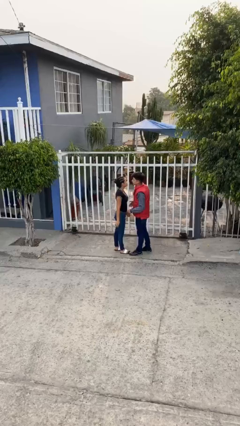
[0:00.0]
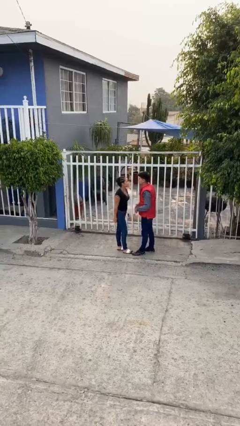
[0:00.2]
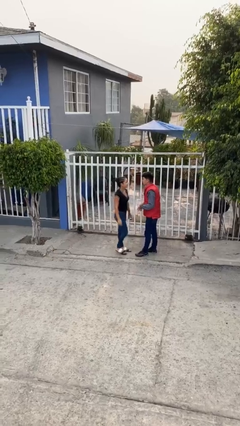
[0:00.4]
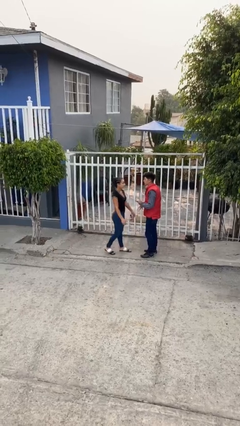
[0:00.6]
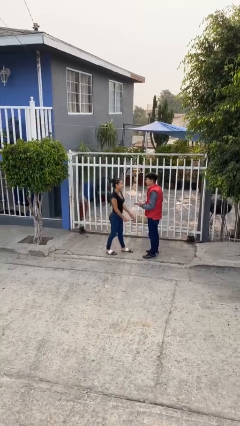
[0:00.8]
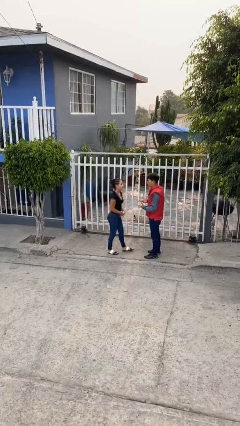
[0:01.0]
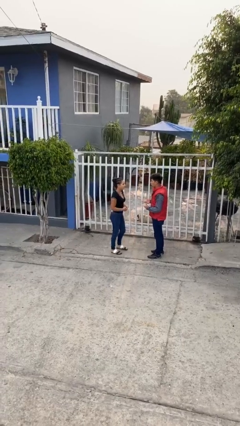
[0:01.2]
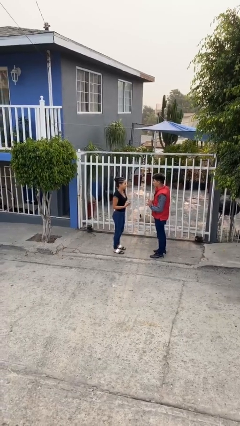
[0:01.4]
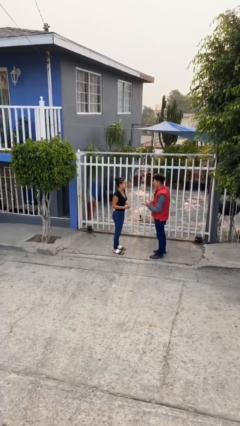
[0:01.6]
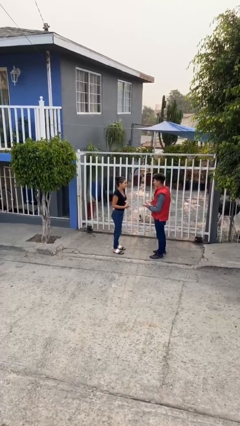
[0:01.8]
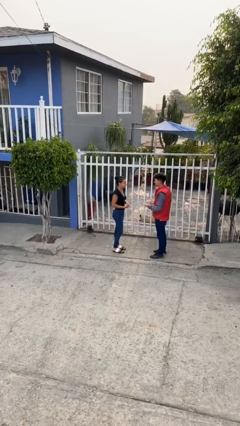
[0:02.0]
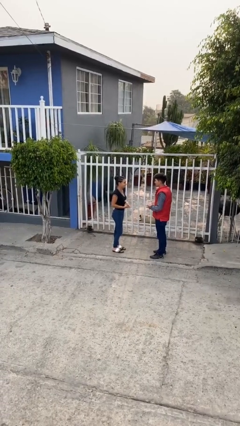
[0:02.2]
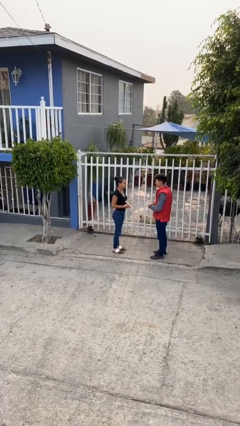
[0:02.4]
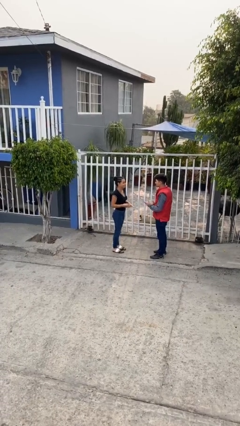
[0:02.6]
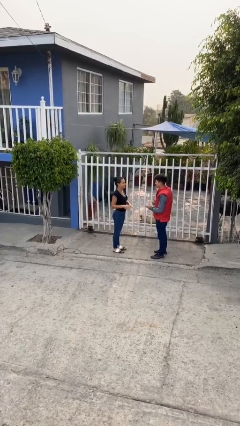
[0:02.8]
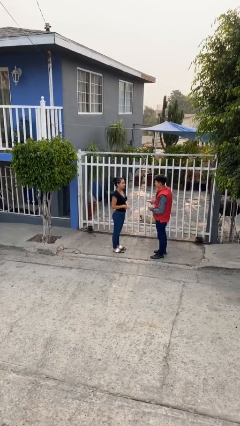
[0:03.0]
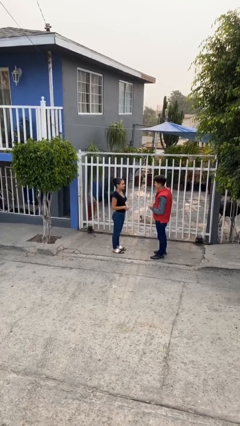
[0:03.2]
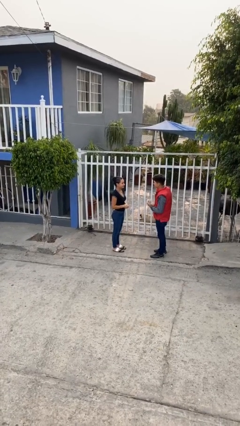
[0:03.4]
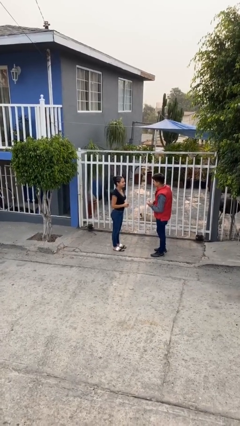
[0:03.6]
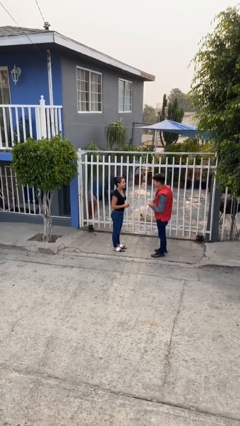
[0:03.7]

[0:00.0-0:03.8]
person talks to person

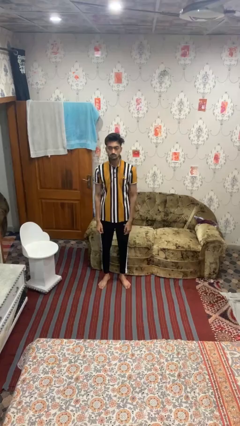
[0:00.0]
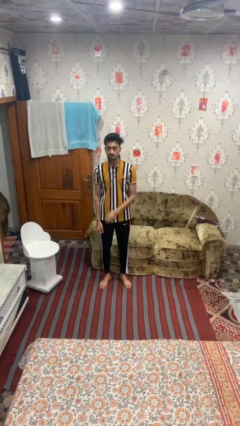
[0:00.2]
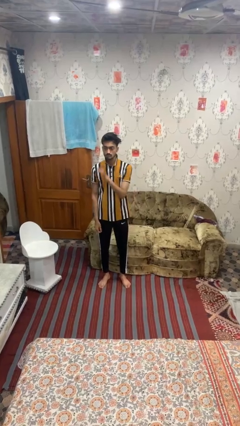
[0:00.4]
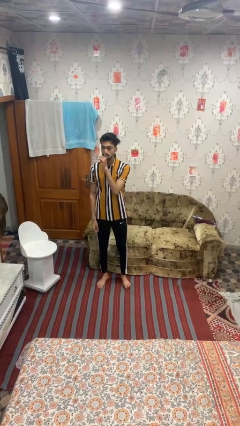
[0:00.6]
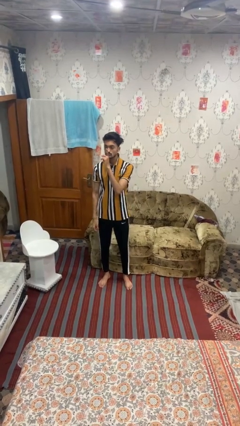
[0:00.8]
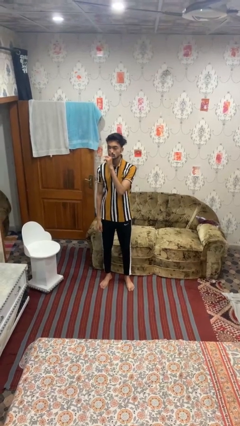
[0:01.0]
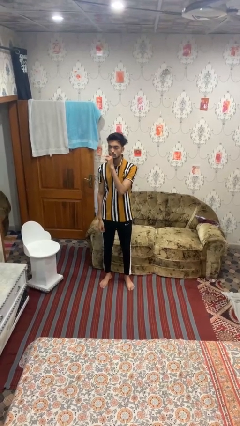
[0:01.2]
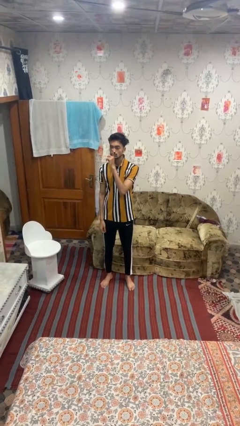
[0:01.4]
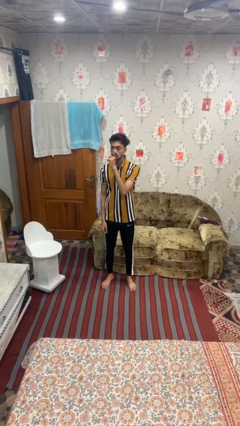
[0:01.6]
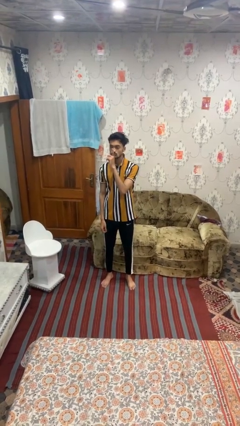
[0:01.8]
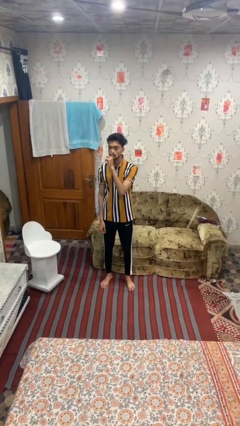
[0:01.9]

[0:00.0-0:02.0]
person gestures be quiet

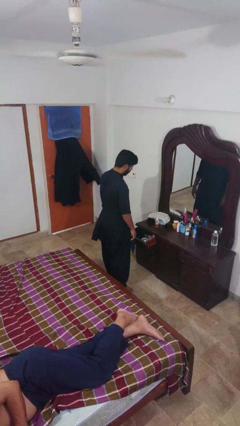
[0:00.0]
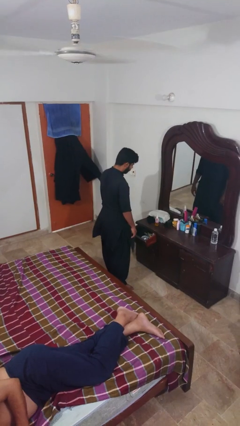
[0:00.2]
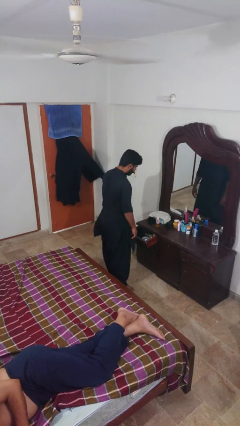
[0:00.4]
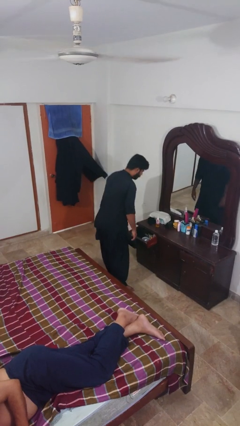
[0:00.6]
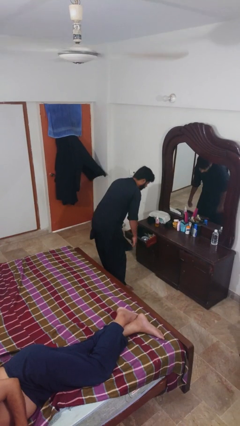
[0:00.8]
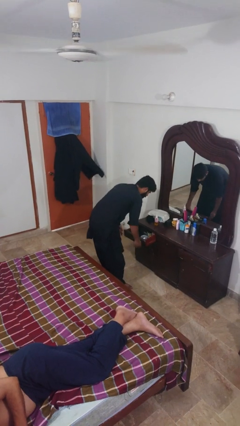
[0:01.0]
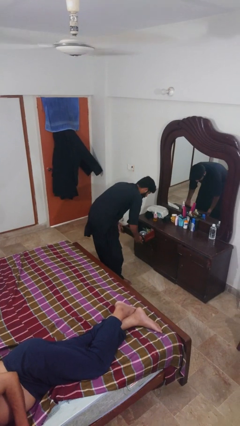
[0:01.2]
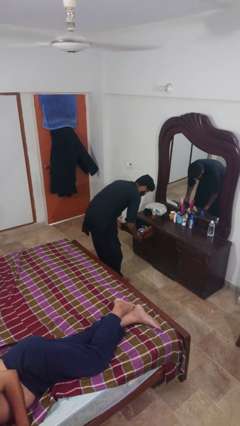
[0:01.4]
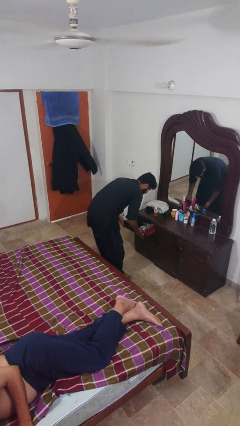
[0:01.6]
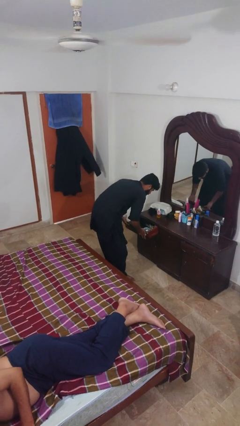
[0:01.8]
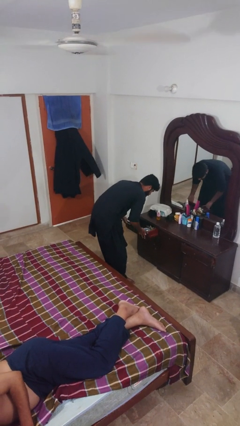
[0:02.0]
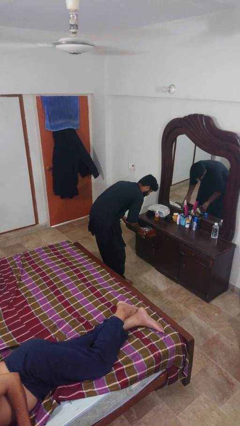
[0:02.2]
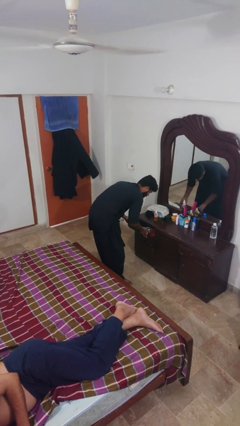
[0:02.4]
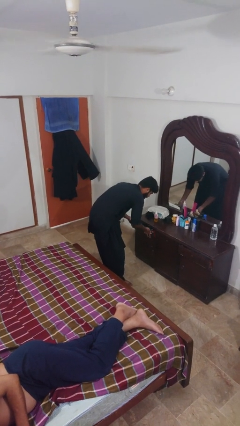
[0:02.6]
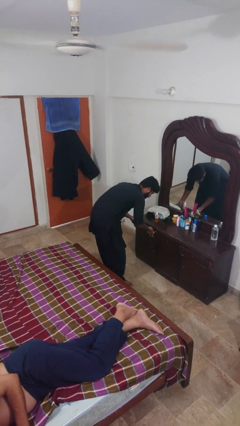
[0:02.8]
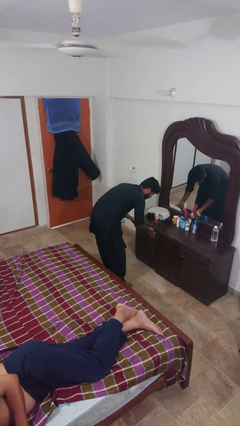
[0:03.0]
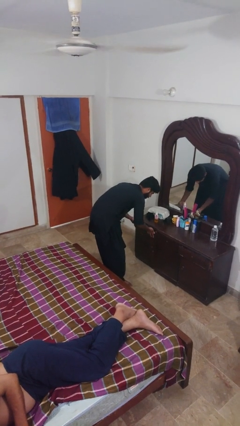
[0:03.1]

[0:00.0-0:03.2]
person closes dresser drawer

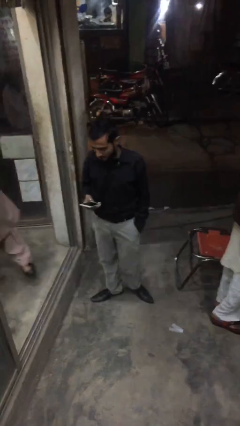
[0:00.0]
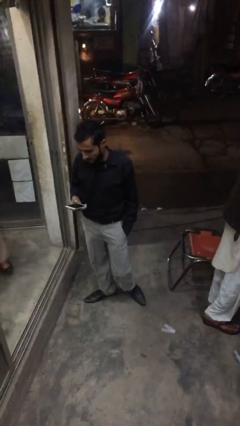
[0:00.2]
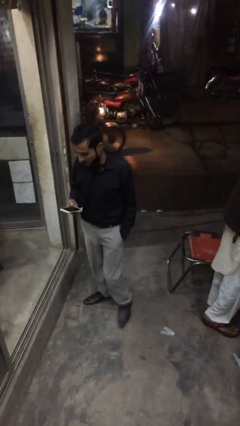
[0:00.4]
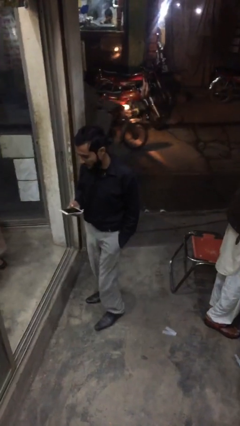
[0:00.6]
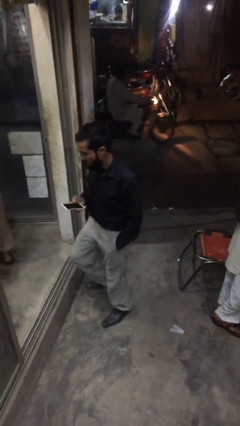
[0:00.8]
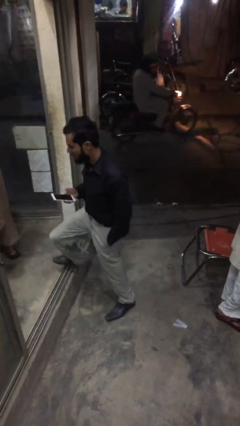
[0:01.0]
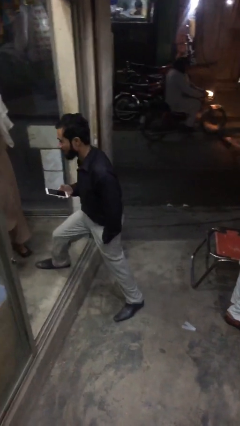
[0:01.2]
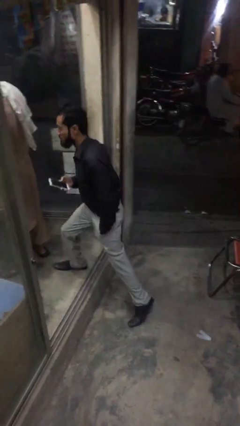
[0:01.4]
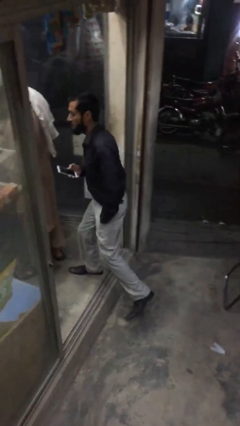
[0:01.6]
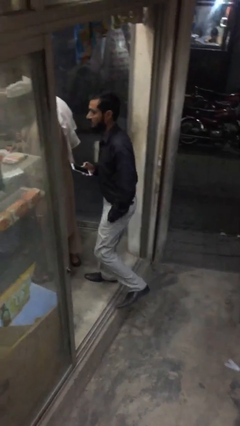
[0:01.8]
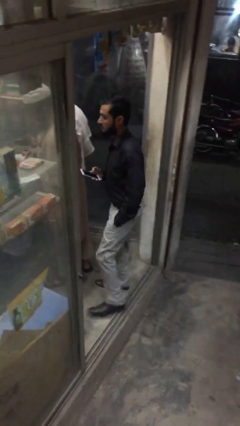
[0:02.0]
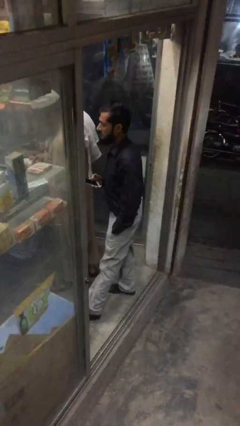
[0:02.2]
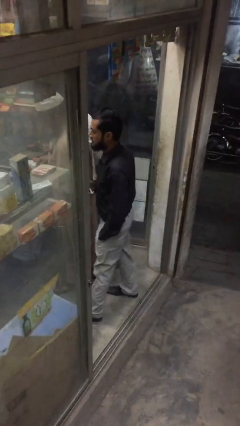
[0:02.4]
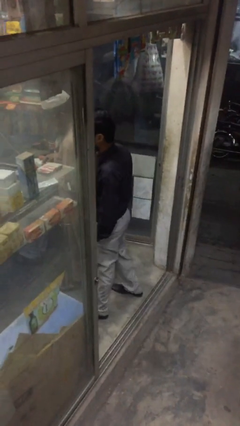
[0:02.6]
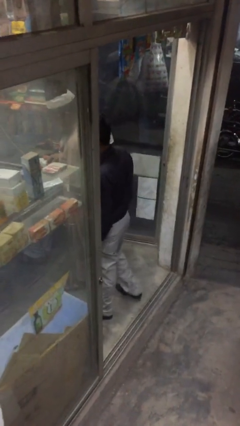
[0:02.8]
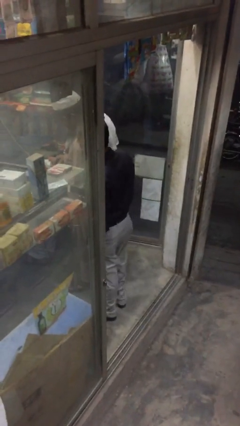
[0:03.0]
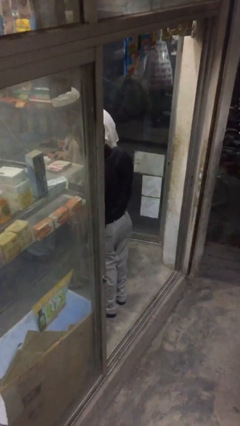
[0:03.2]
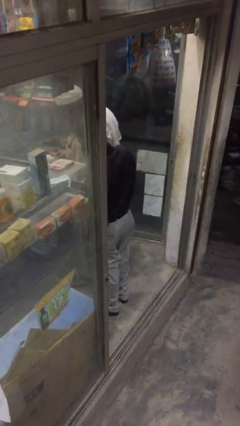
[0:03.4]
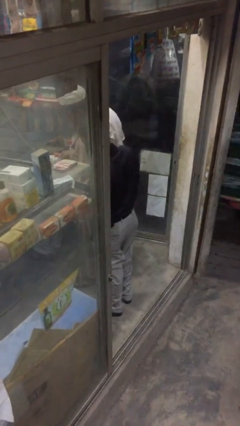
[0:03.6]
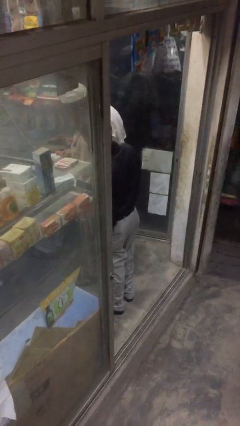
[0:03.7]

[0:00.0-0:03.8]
person enters scene through structure

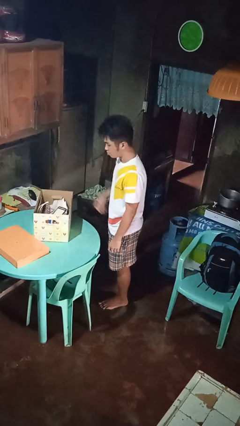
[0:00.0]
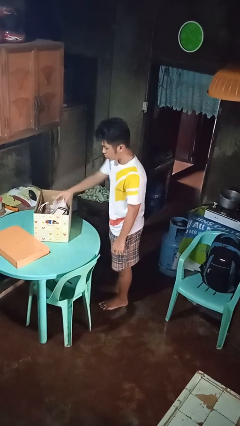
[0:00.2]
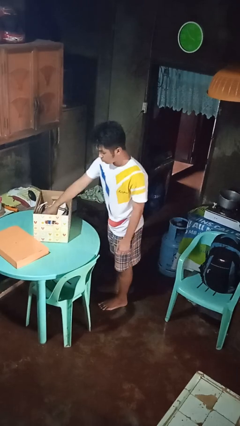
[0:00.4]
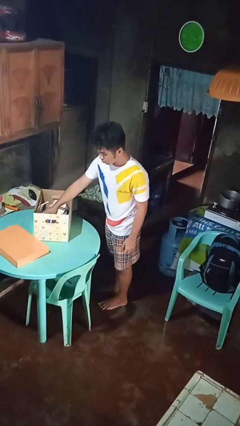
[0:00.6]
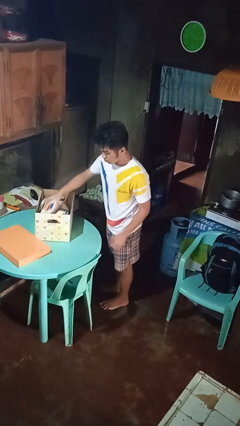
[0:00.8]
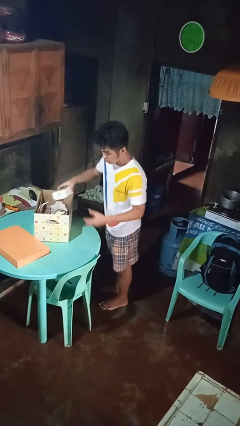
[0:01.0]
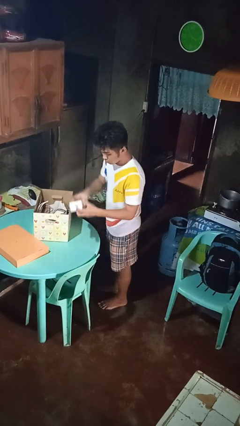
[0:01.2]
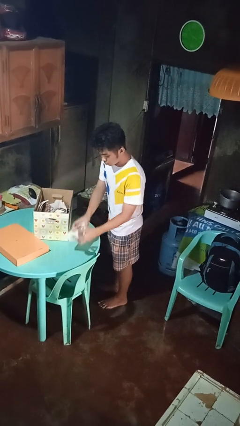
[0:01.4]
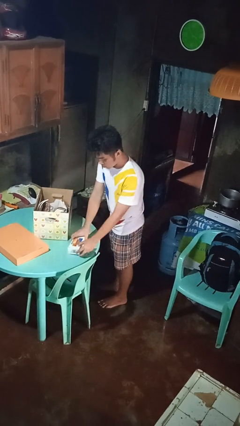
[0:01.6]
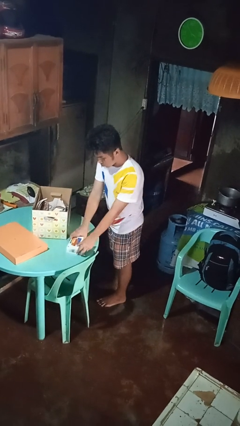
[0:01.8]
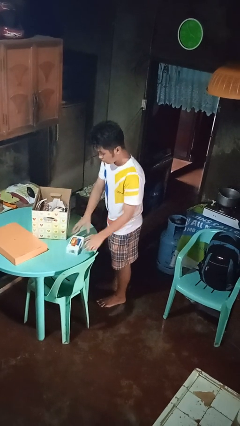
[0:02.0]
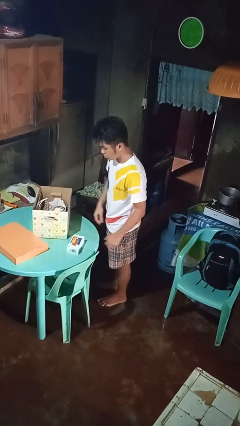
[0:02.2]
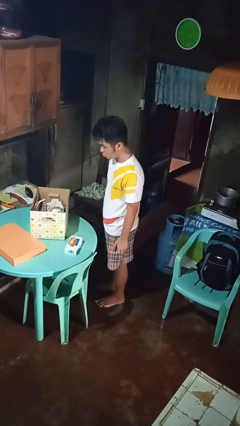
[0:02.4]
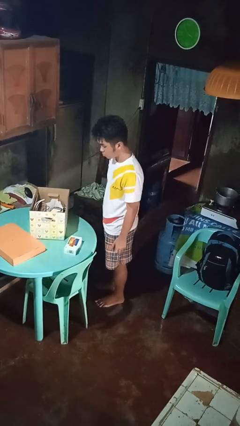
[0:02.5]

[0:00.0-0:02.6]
person takes object from box

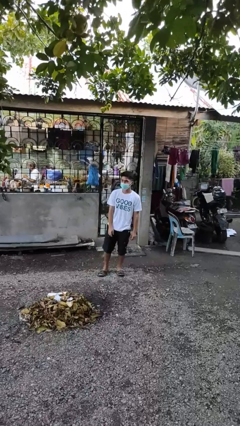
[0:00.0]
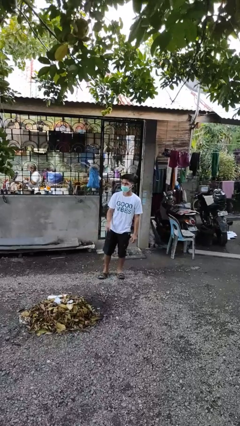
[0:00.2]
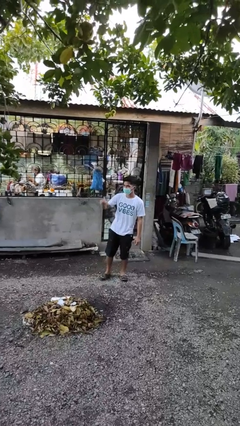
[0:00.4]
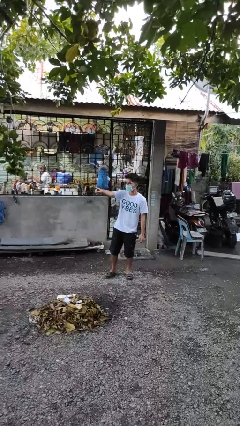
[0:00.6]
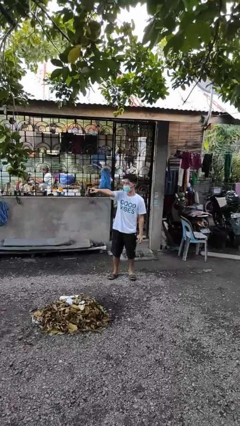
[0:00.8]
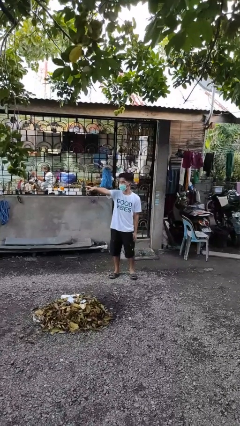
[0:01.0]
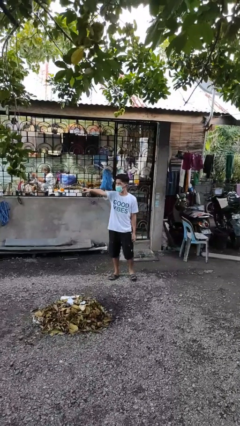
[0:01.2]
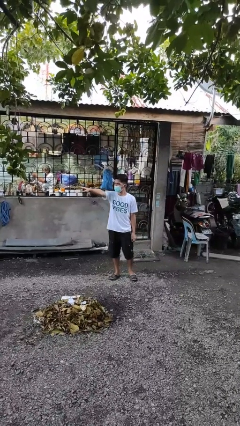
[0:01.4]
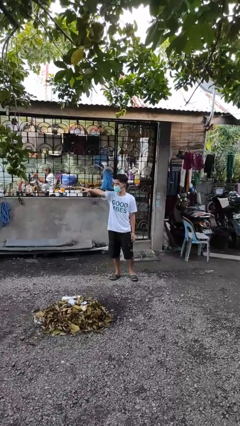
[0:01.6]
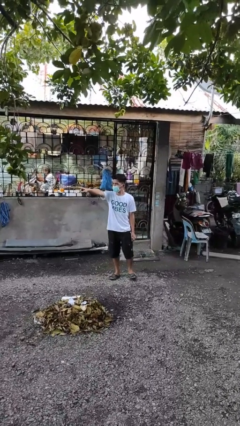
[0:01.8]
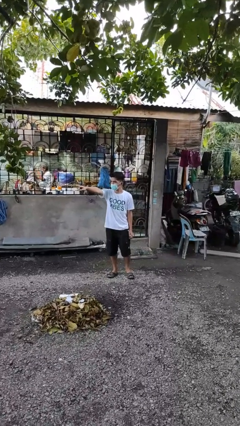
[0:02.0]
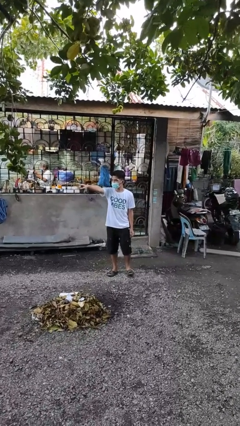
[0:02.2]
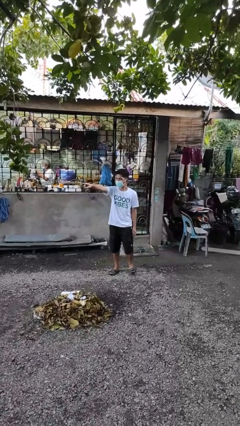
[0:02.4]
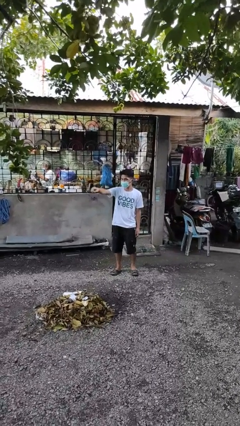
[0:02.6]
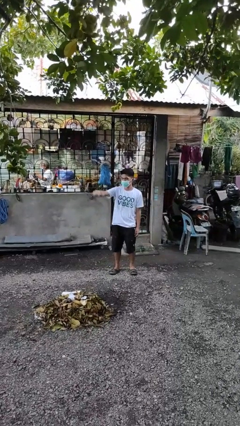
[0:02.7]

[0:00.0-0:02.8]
person points at person
